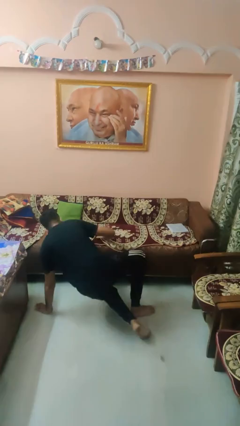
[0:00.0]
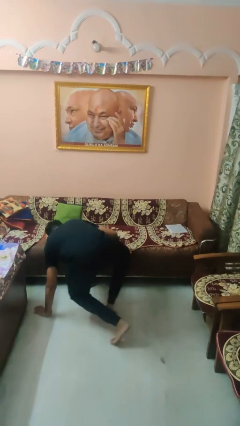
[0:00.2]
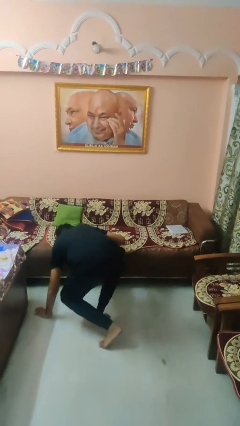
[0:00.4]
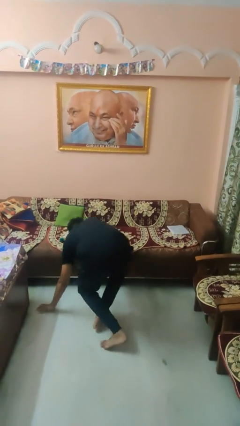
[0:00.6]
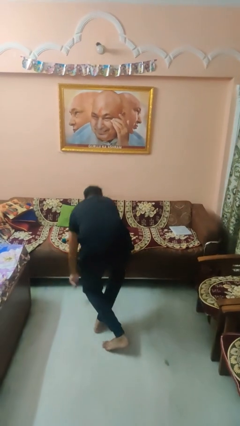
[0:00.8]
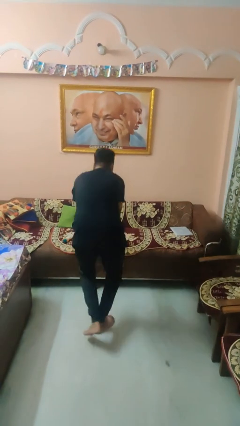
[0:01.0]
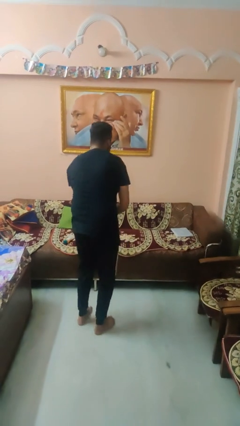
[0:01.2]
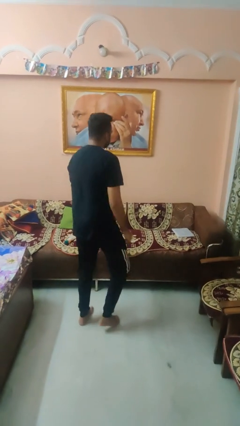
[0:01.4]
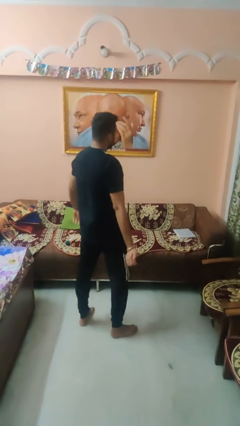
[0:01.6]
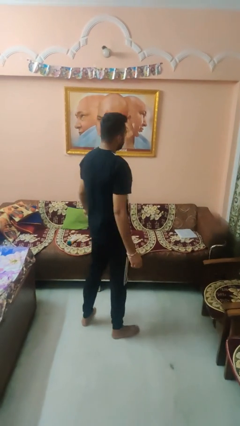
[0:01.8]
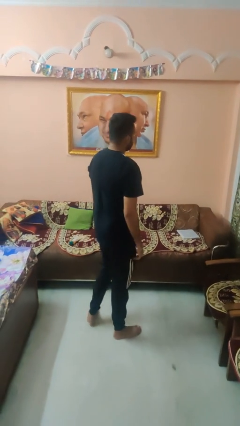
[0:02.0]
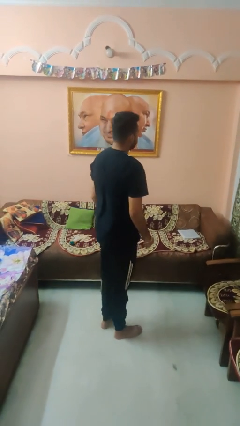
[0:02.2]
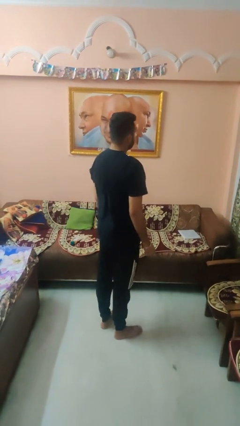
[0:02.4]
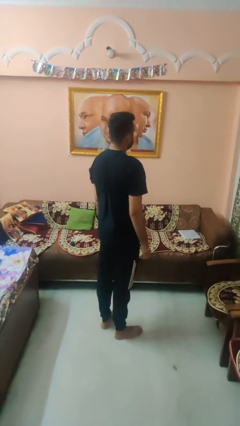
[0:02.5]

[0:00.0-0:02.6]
person stands up from floor

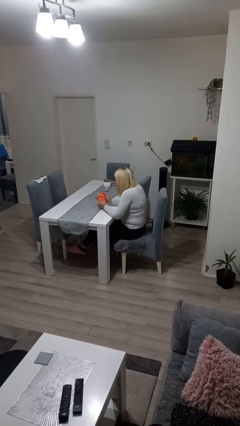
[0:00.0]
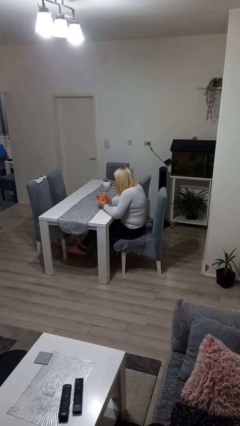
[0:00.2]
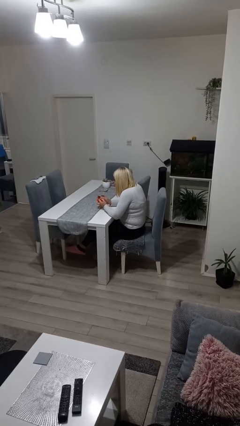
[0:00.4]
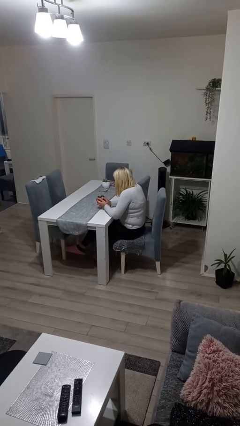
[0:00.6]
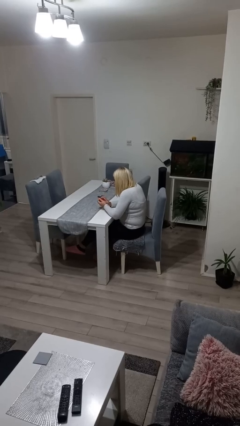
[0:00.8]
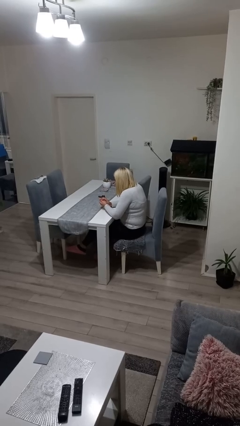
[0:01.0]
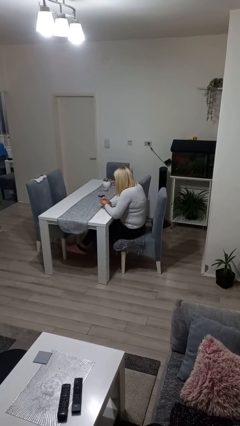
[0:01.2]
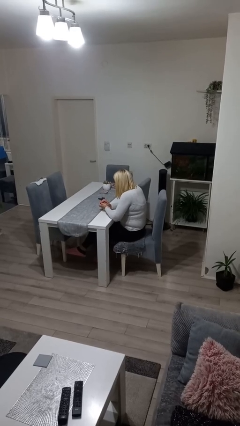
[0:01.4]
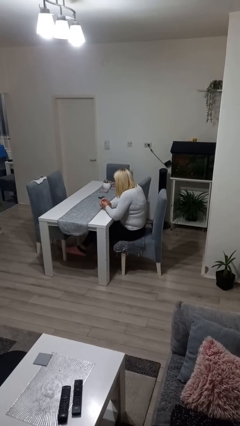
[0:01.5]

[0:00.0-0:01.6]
person crumples paper

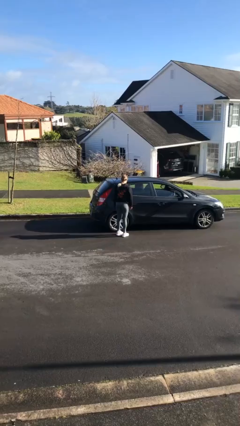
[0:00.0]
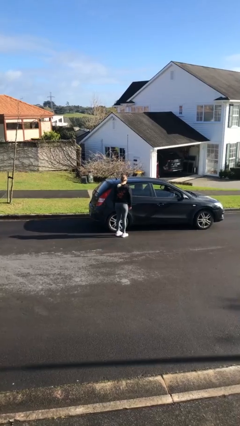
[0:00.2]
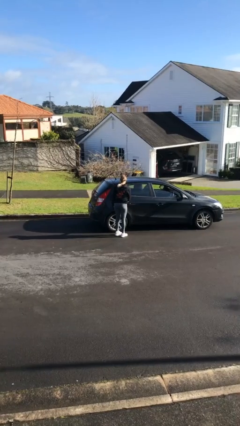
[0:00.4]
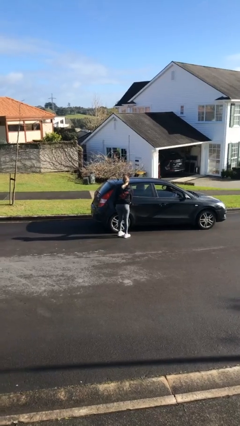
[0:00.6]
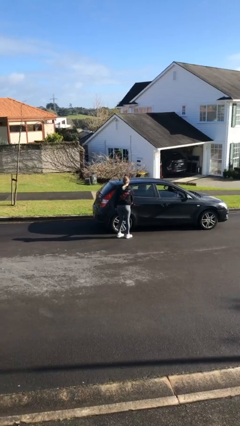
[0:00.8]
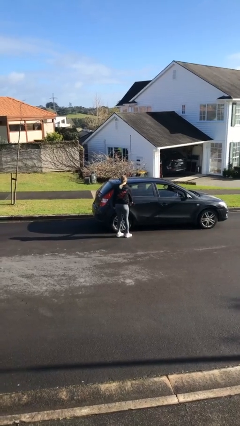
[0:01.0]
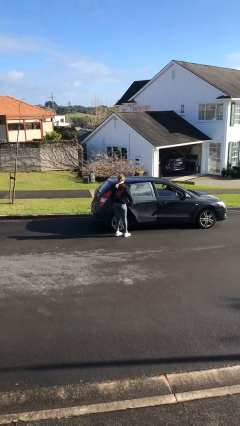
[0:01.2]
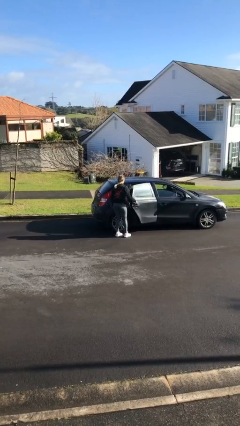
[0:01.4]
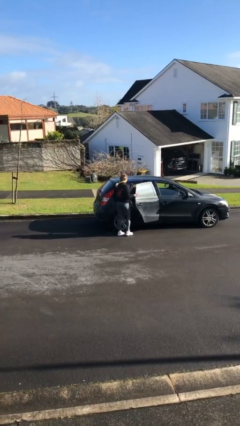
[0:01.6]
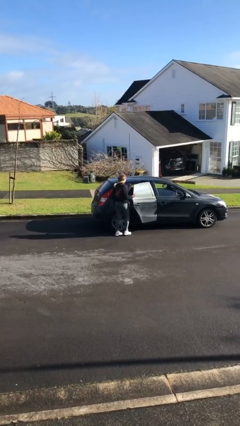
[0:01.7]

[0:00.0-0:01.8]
person opens car door

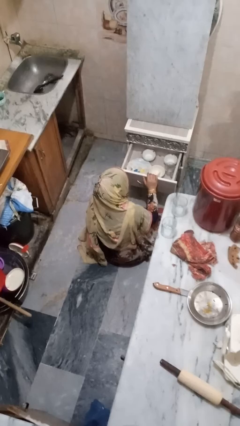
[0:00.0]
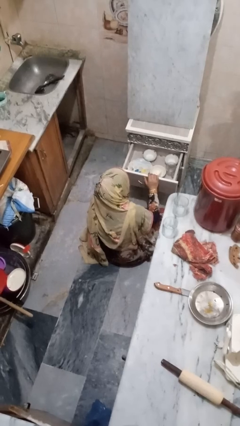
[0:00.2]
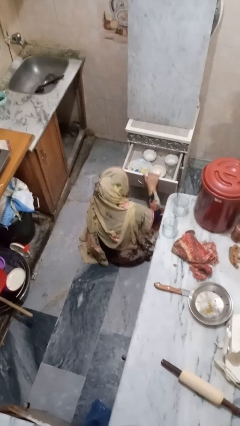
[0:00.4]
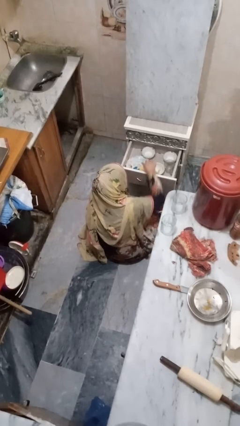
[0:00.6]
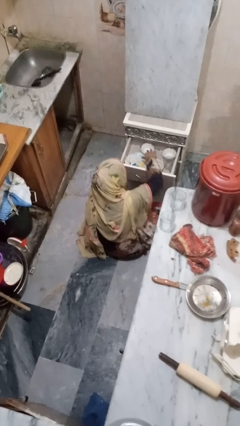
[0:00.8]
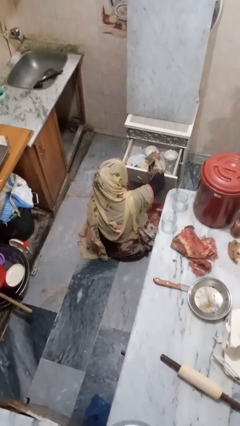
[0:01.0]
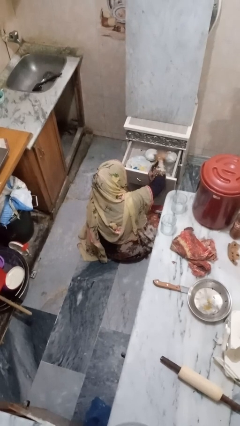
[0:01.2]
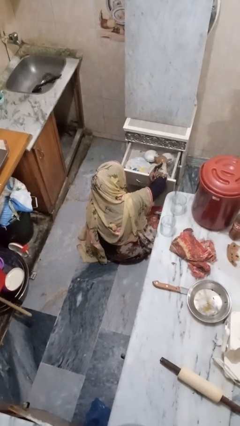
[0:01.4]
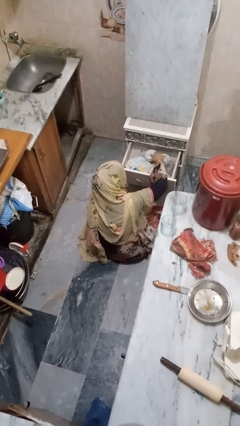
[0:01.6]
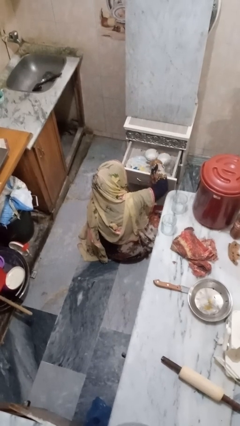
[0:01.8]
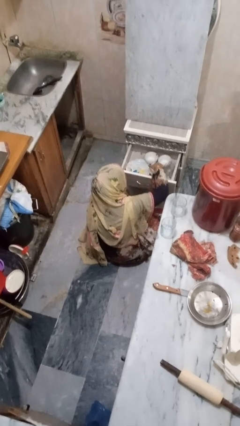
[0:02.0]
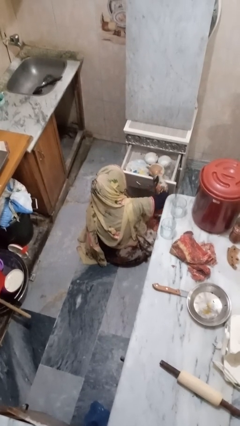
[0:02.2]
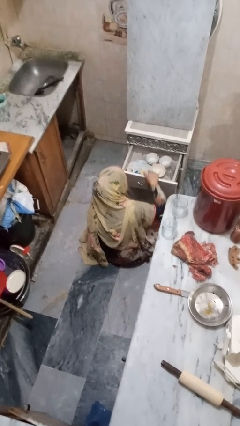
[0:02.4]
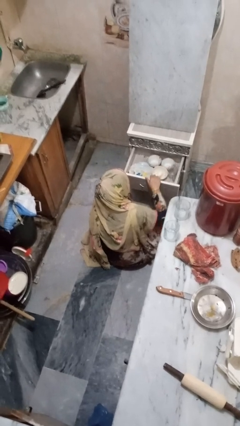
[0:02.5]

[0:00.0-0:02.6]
person searches in kitchen drawer

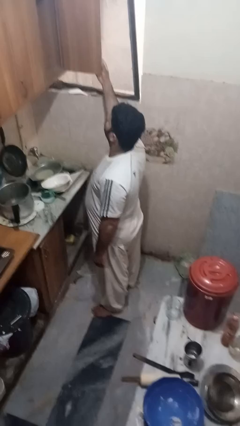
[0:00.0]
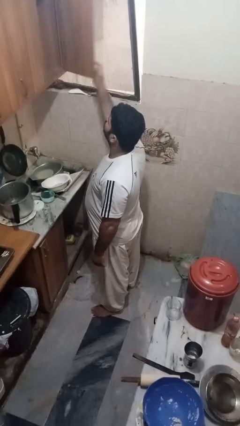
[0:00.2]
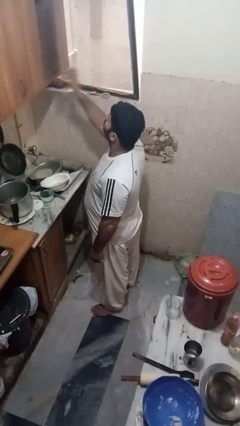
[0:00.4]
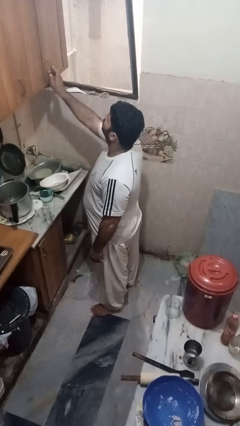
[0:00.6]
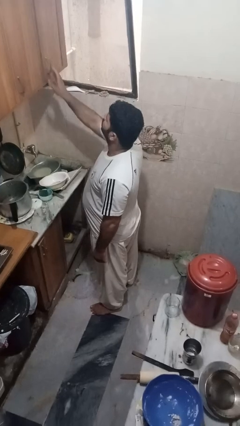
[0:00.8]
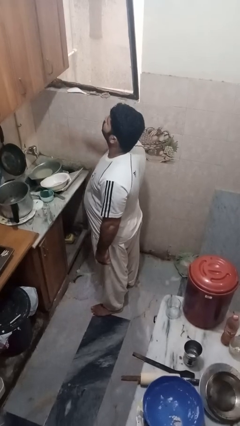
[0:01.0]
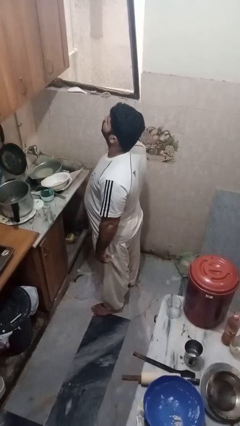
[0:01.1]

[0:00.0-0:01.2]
person closes cabinet

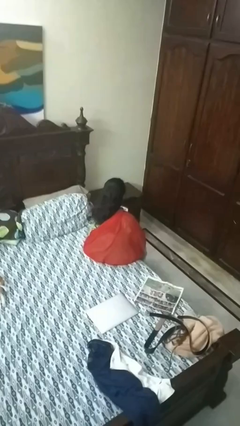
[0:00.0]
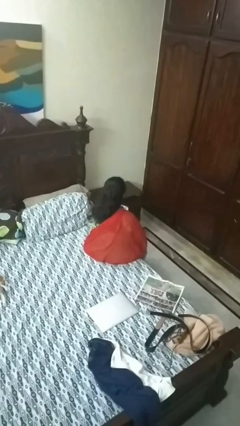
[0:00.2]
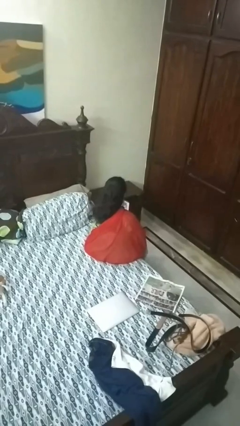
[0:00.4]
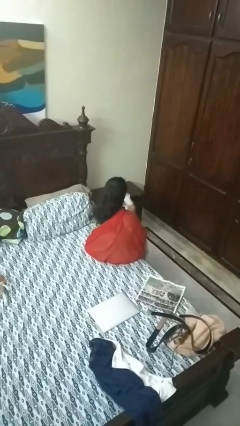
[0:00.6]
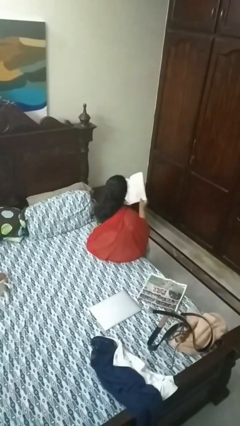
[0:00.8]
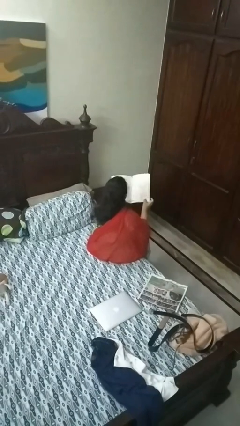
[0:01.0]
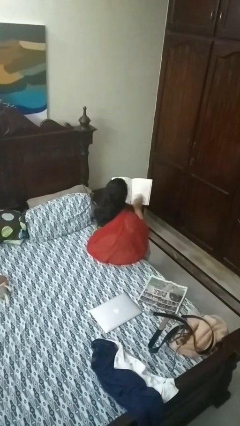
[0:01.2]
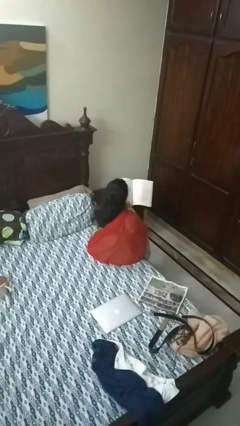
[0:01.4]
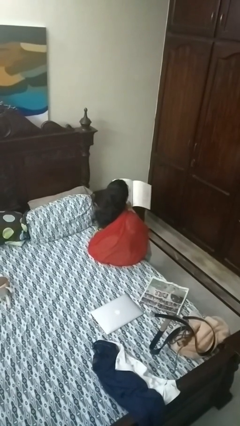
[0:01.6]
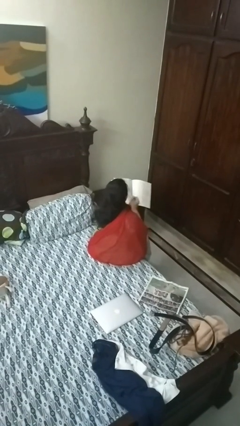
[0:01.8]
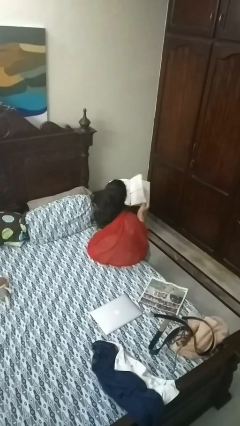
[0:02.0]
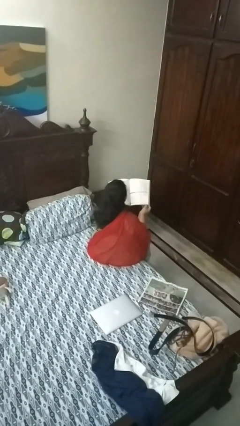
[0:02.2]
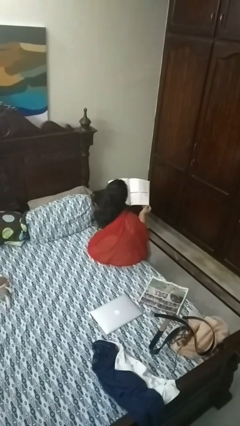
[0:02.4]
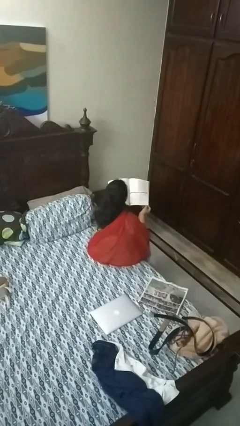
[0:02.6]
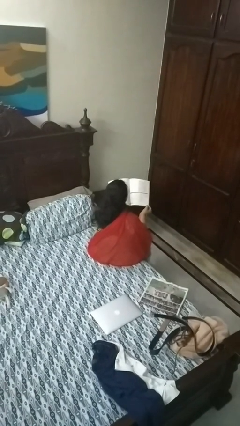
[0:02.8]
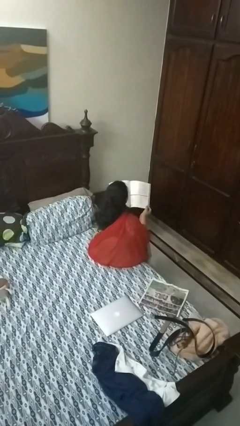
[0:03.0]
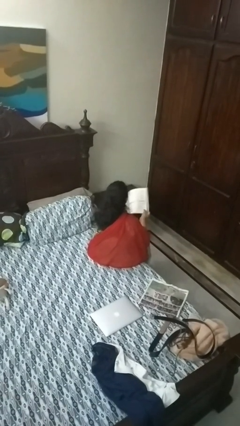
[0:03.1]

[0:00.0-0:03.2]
person reads book

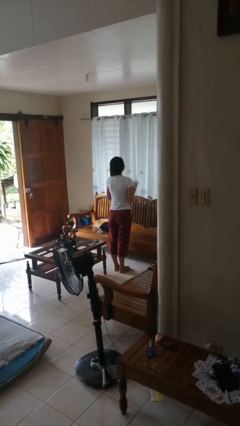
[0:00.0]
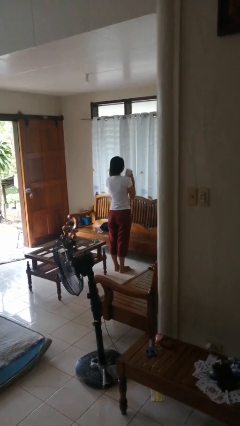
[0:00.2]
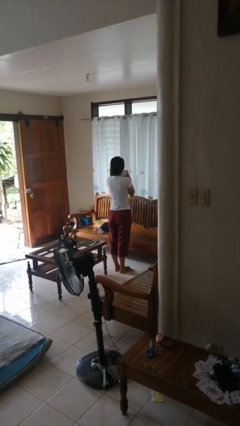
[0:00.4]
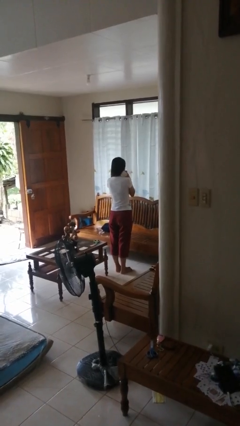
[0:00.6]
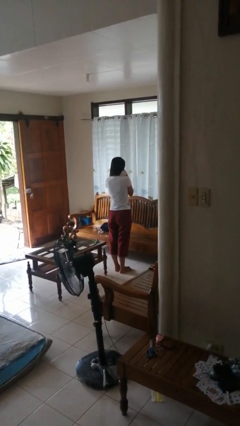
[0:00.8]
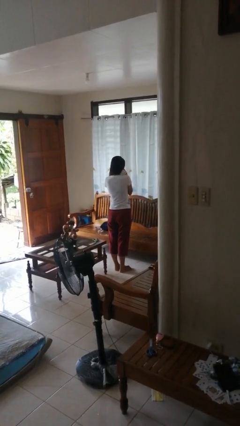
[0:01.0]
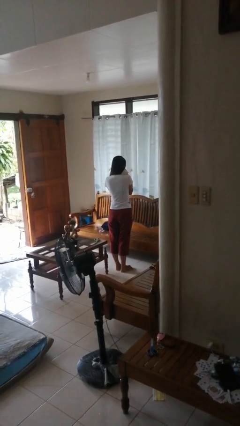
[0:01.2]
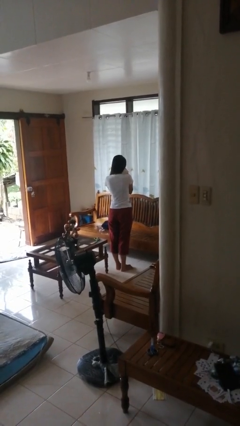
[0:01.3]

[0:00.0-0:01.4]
person hugs stuffed animal

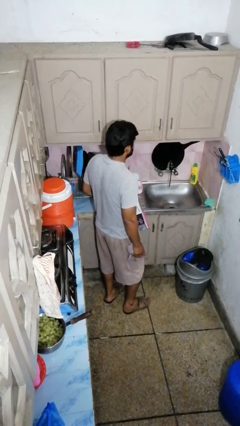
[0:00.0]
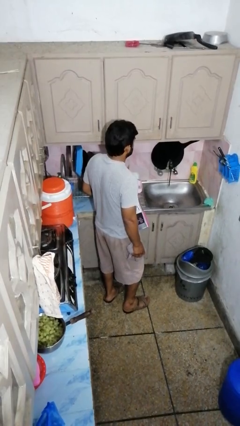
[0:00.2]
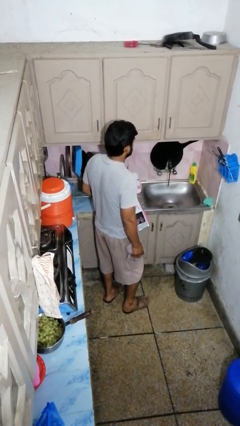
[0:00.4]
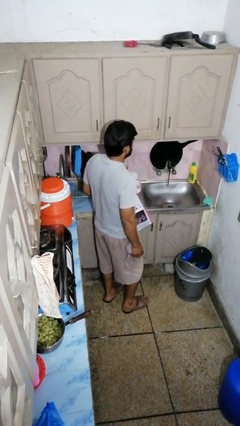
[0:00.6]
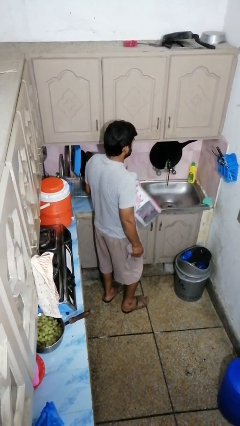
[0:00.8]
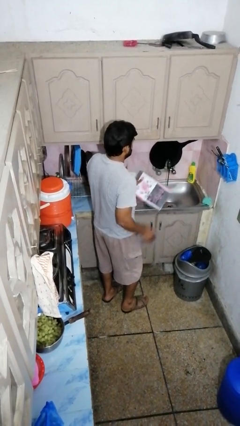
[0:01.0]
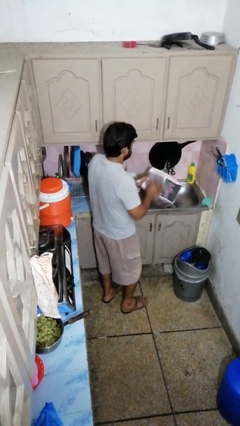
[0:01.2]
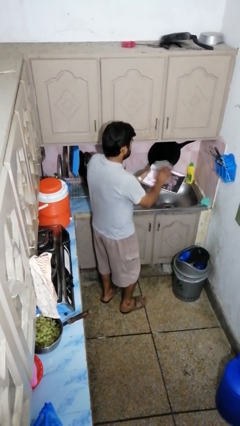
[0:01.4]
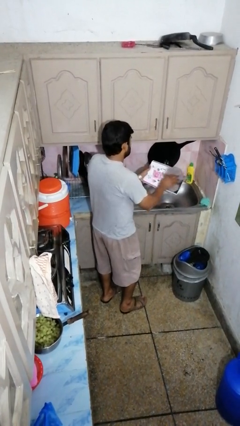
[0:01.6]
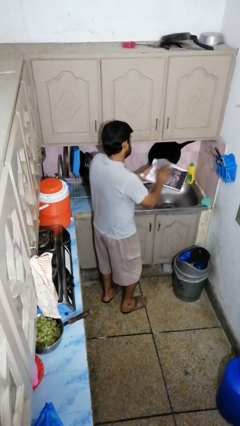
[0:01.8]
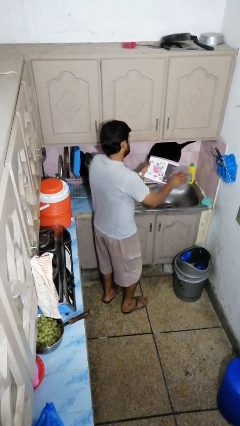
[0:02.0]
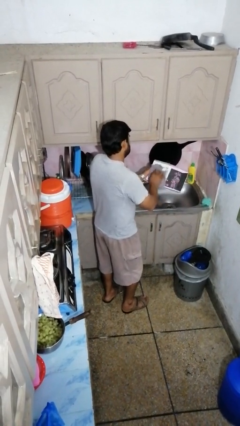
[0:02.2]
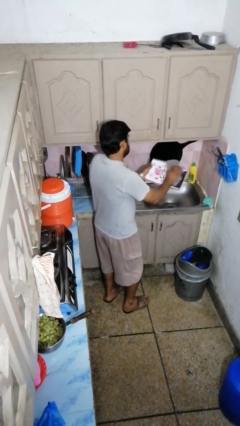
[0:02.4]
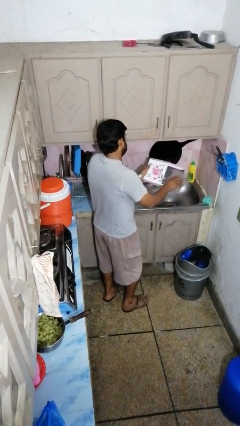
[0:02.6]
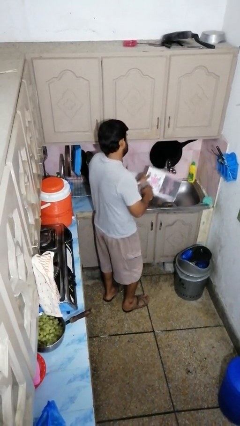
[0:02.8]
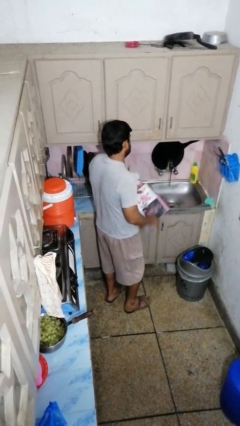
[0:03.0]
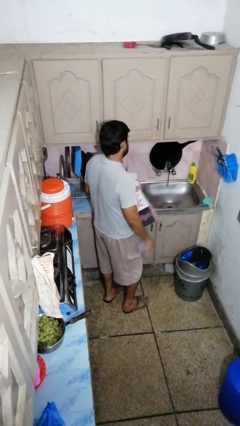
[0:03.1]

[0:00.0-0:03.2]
person dries dish
